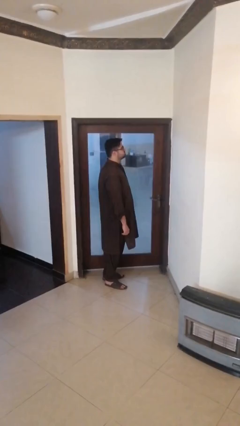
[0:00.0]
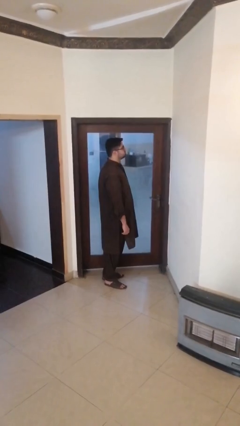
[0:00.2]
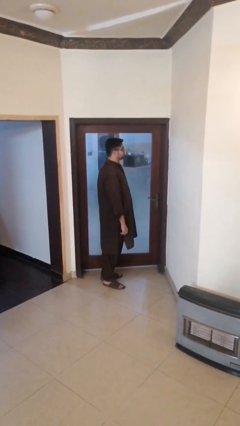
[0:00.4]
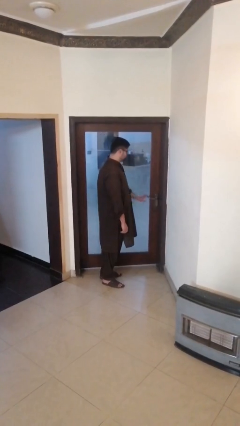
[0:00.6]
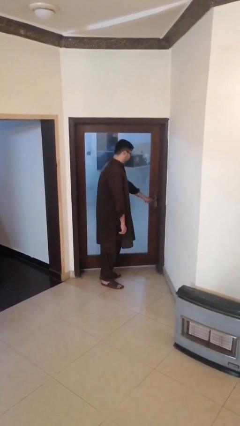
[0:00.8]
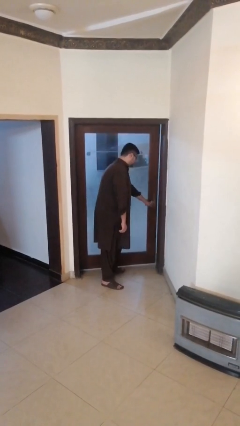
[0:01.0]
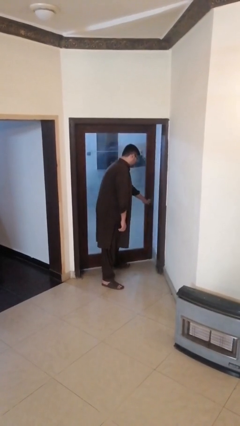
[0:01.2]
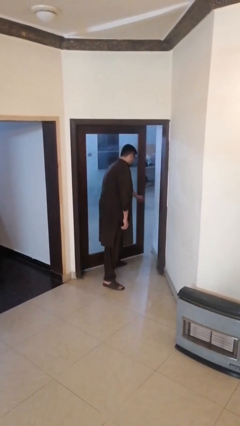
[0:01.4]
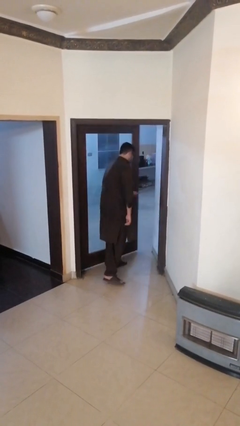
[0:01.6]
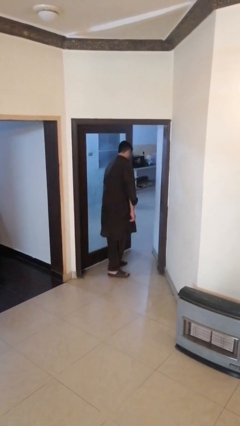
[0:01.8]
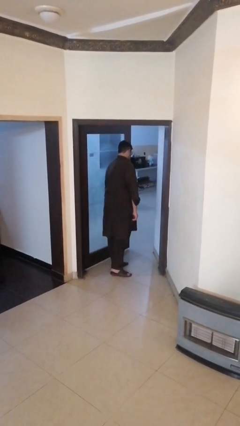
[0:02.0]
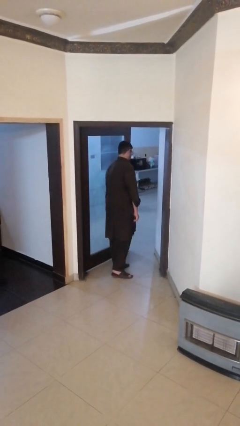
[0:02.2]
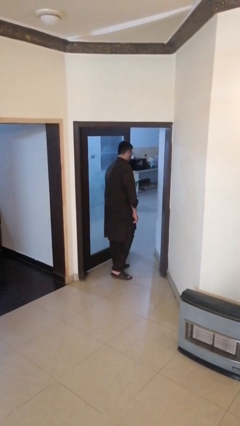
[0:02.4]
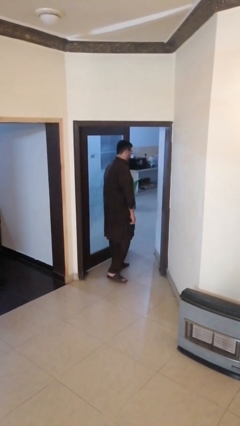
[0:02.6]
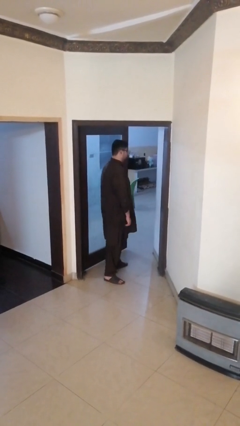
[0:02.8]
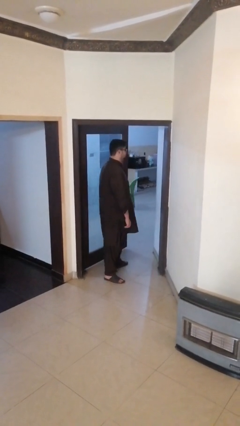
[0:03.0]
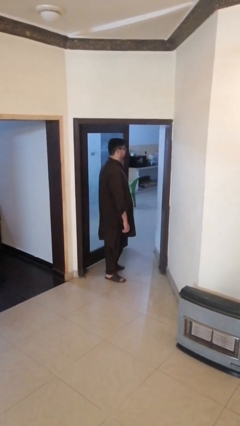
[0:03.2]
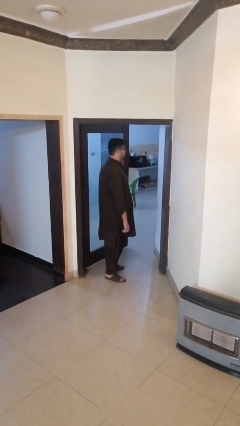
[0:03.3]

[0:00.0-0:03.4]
person opens facility door

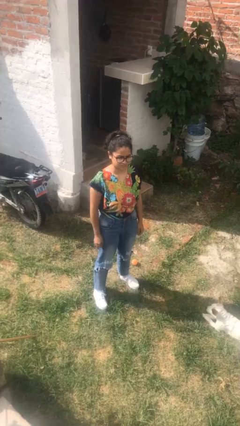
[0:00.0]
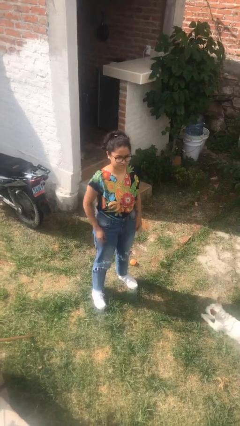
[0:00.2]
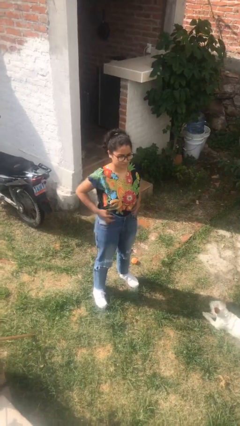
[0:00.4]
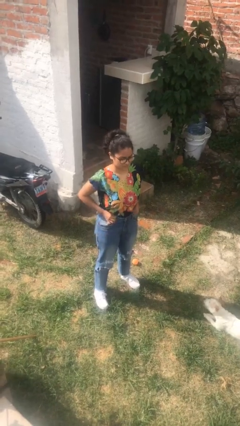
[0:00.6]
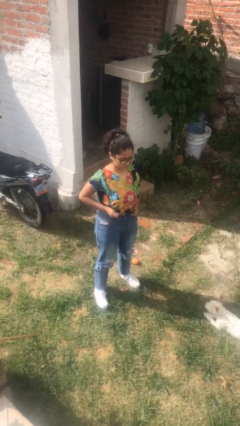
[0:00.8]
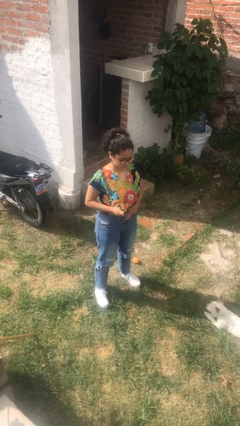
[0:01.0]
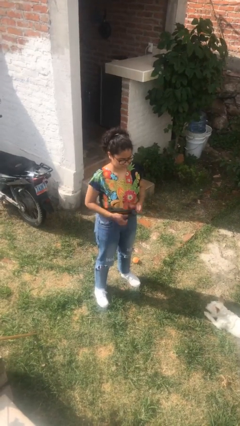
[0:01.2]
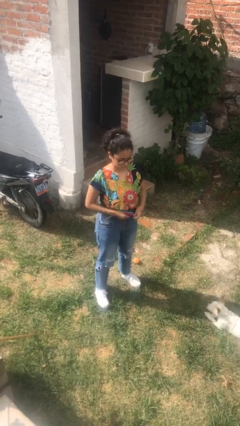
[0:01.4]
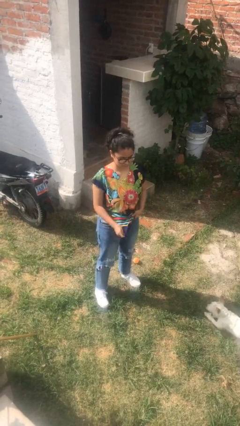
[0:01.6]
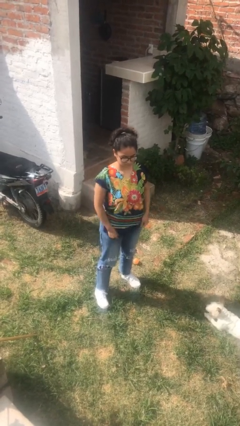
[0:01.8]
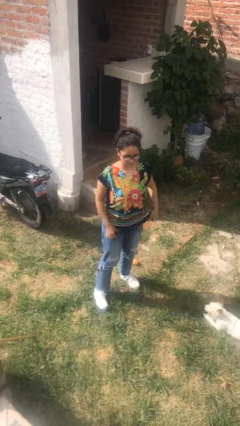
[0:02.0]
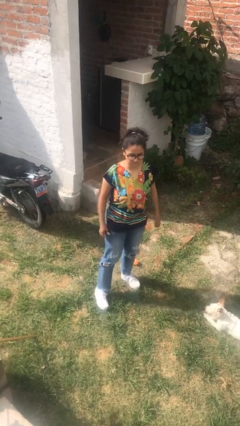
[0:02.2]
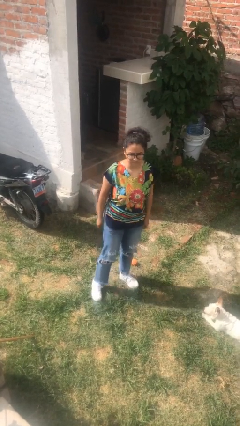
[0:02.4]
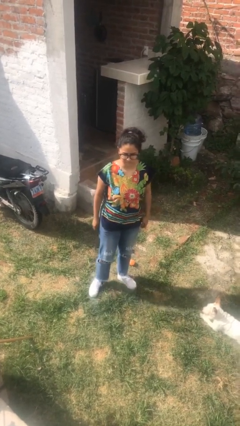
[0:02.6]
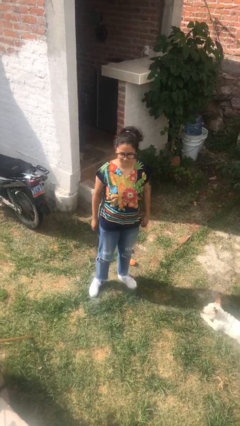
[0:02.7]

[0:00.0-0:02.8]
person untucks shirt

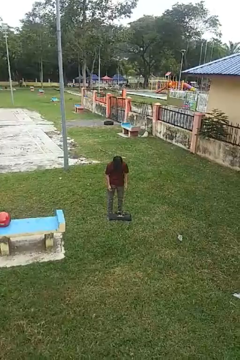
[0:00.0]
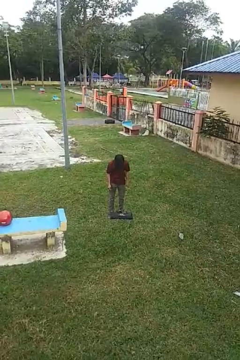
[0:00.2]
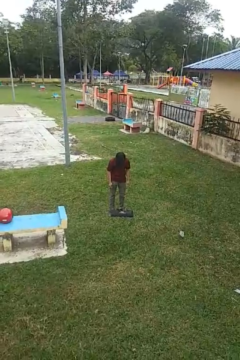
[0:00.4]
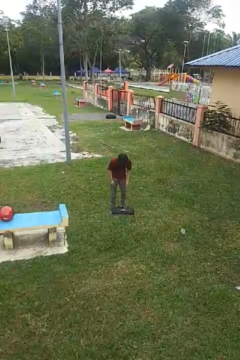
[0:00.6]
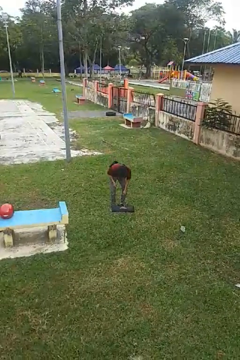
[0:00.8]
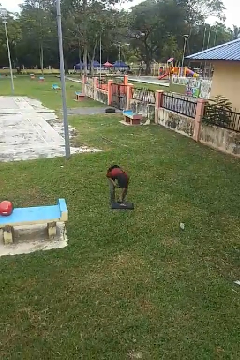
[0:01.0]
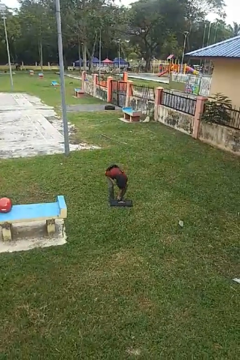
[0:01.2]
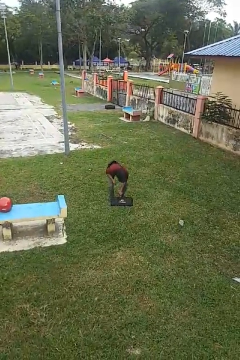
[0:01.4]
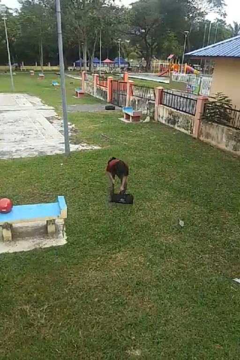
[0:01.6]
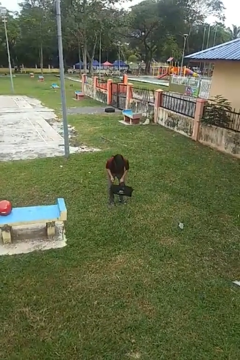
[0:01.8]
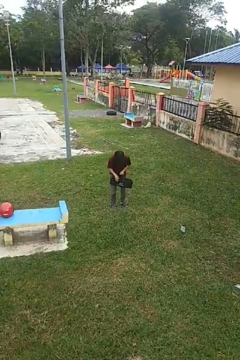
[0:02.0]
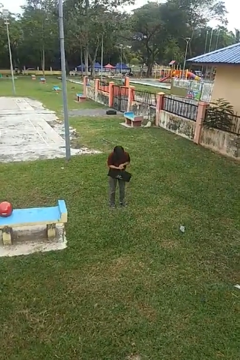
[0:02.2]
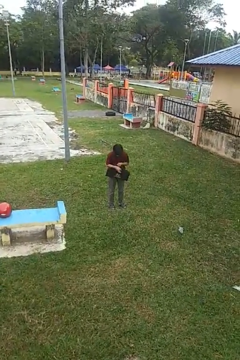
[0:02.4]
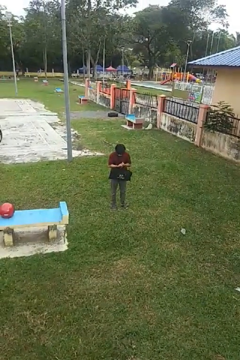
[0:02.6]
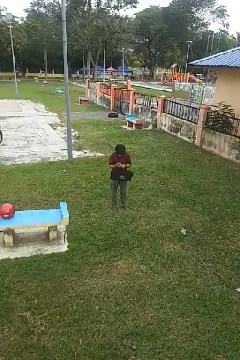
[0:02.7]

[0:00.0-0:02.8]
person picks up object from floor

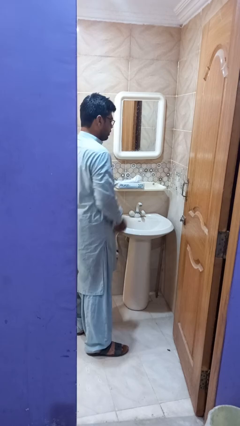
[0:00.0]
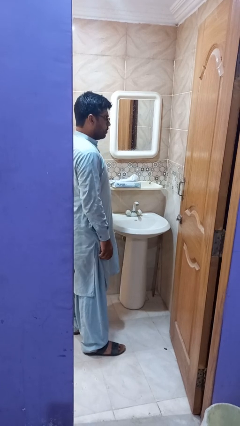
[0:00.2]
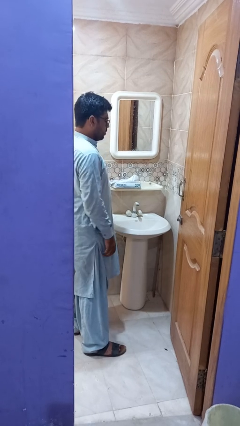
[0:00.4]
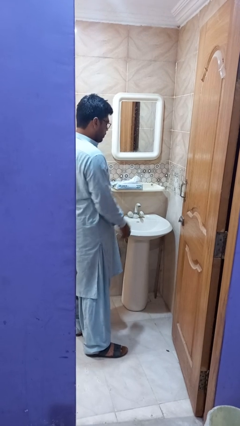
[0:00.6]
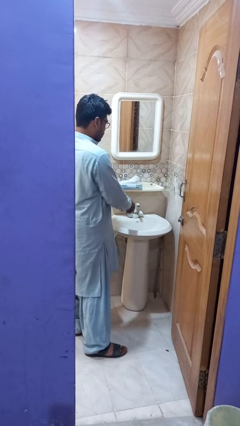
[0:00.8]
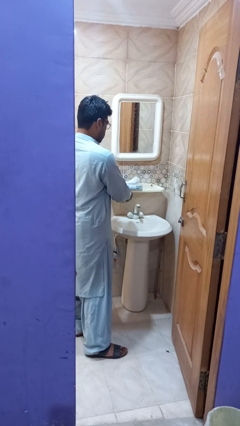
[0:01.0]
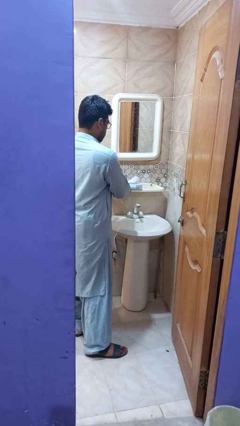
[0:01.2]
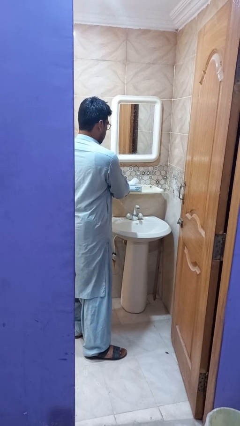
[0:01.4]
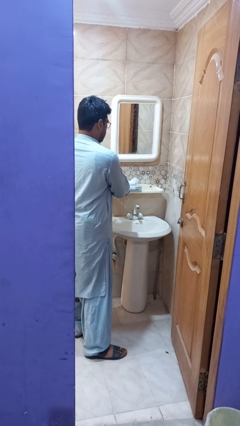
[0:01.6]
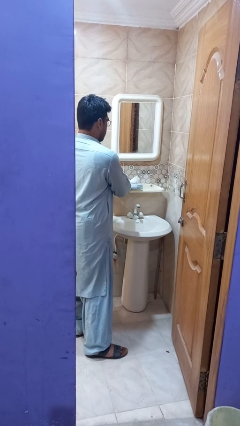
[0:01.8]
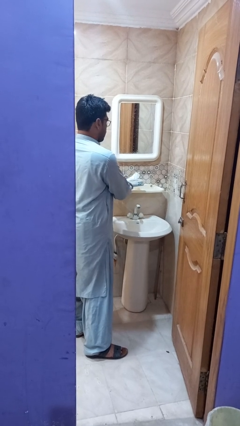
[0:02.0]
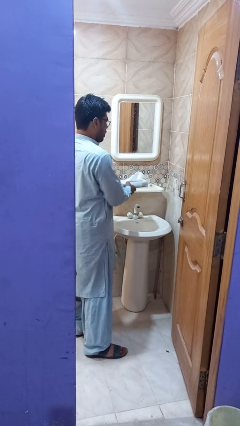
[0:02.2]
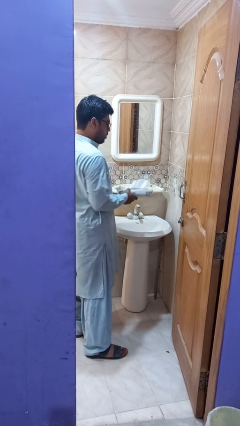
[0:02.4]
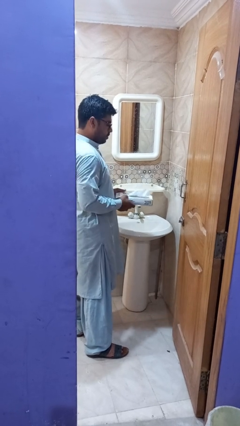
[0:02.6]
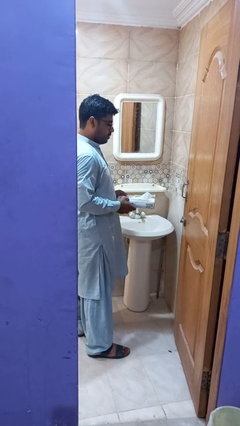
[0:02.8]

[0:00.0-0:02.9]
person picks up object from countertop

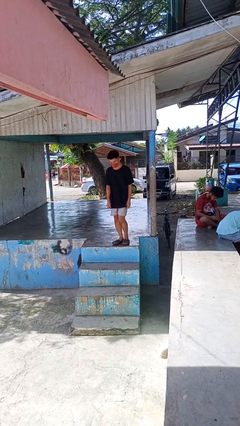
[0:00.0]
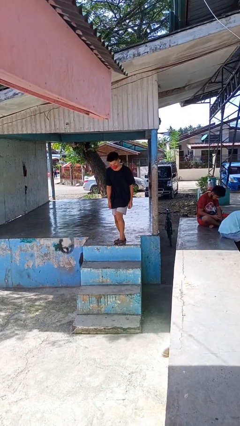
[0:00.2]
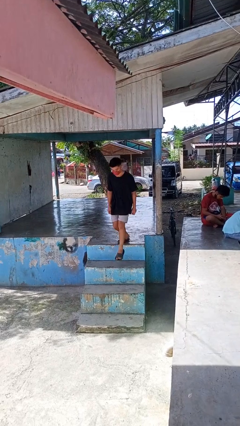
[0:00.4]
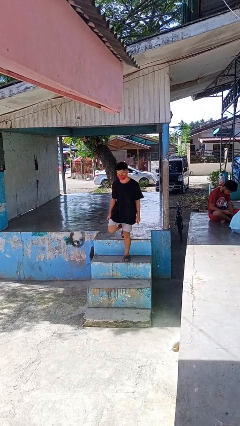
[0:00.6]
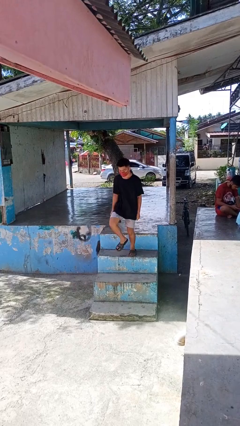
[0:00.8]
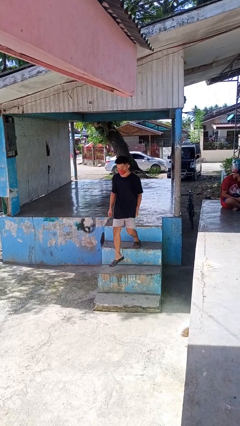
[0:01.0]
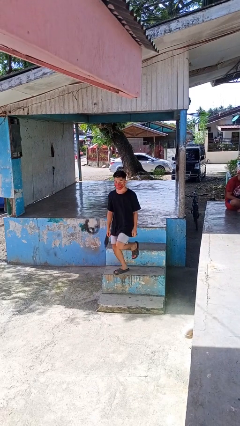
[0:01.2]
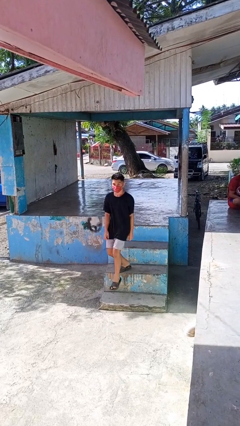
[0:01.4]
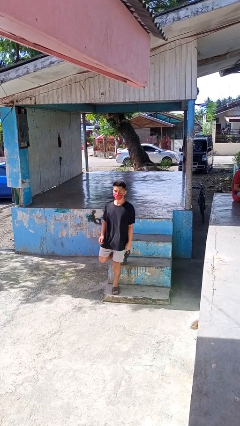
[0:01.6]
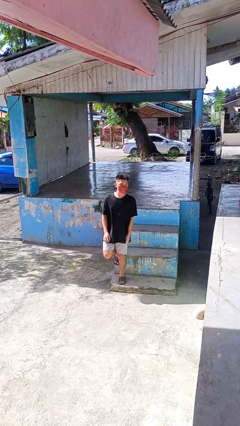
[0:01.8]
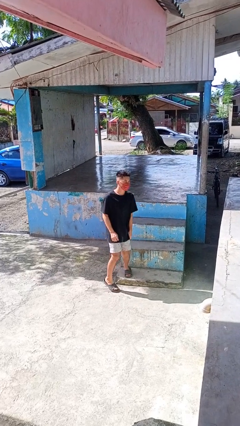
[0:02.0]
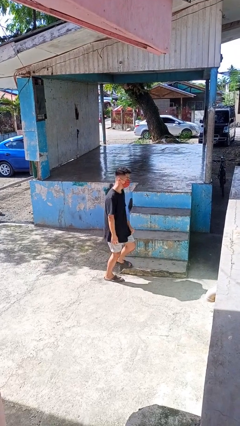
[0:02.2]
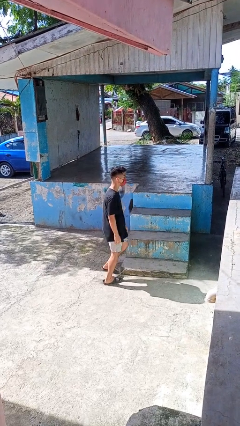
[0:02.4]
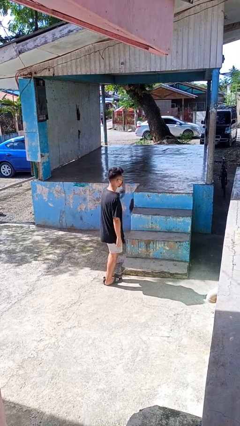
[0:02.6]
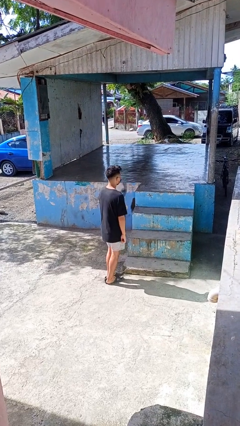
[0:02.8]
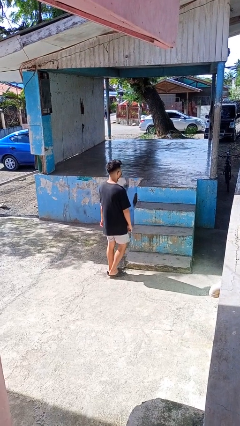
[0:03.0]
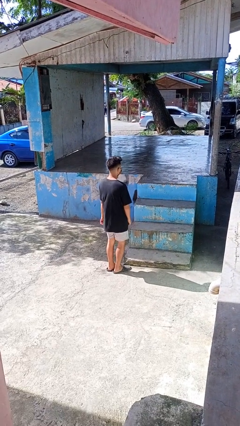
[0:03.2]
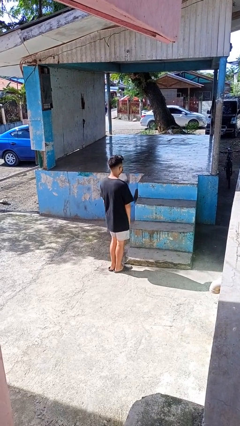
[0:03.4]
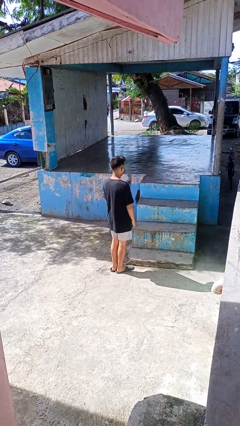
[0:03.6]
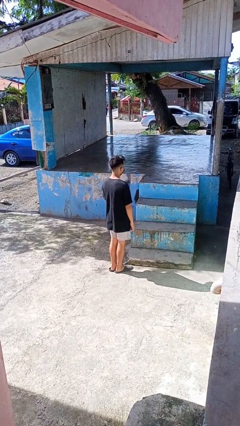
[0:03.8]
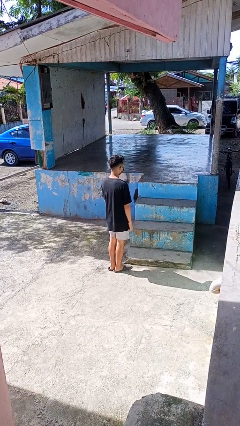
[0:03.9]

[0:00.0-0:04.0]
person climbs down stairs

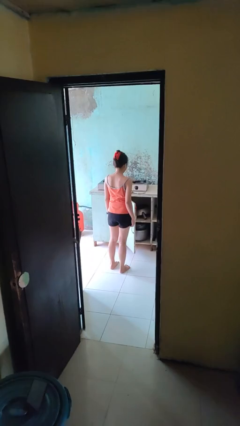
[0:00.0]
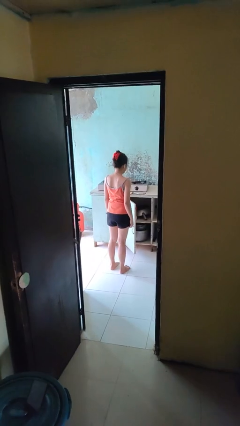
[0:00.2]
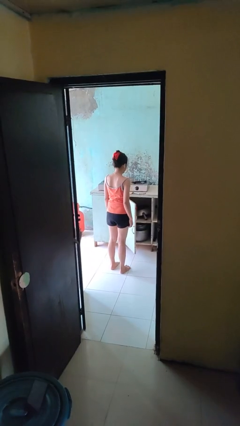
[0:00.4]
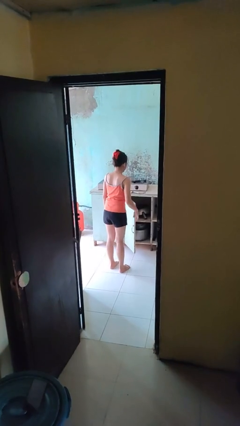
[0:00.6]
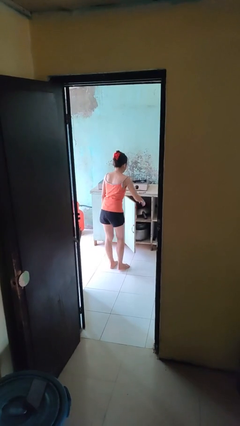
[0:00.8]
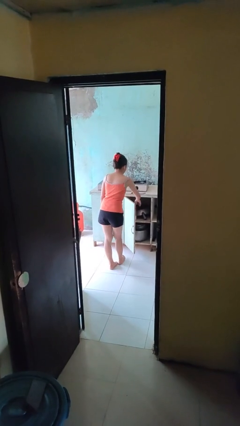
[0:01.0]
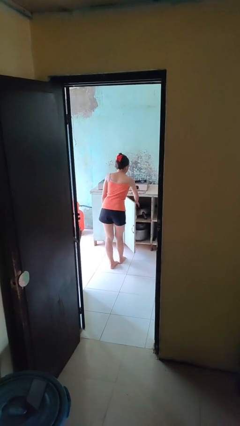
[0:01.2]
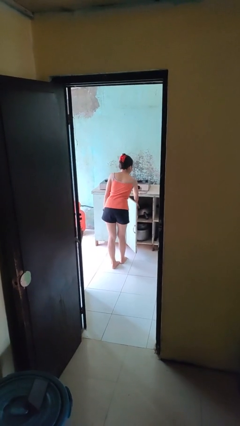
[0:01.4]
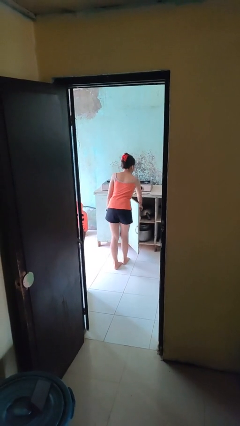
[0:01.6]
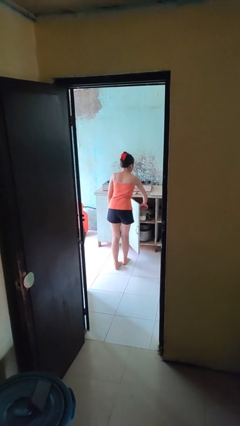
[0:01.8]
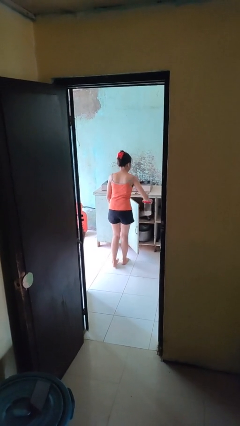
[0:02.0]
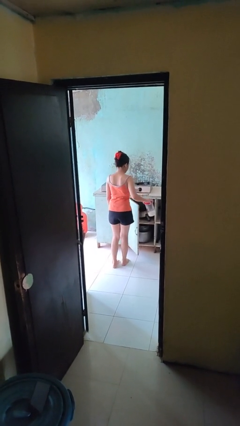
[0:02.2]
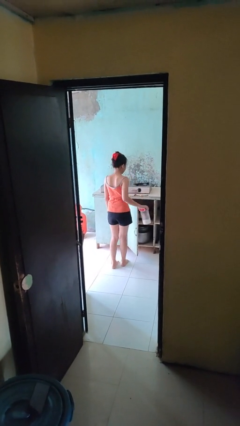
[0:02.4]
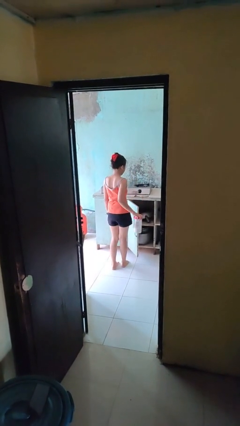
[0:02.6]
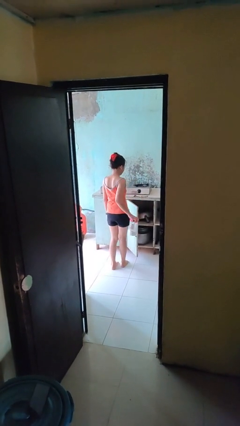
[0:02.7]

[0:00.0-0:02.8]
person picks up object from cabinet
